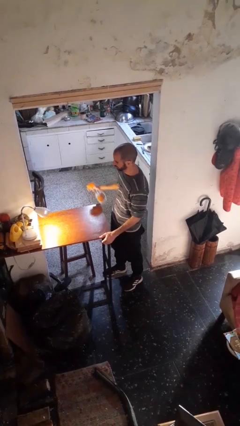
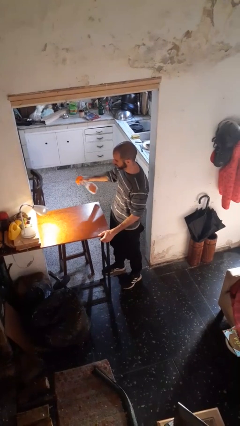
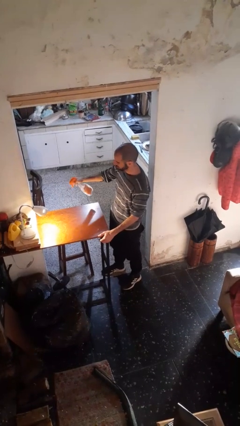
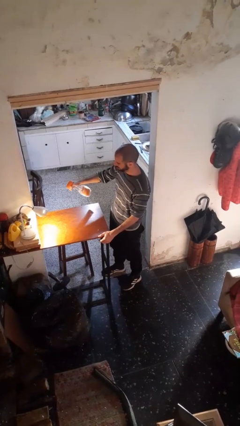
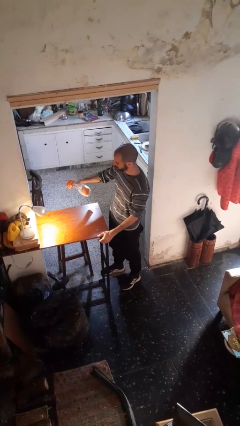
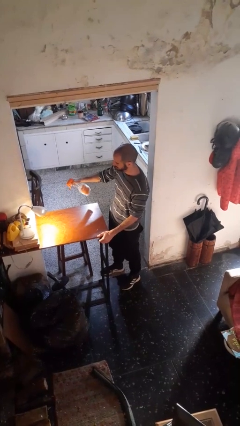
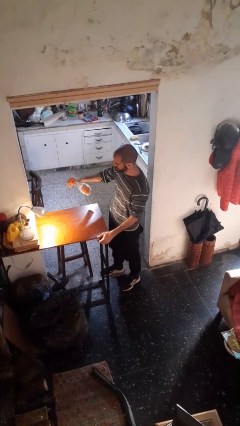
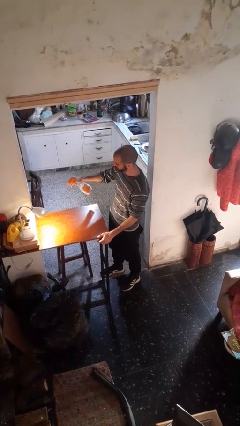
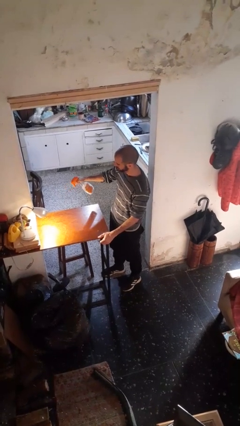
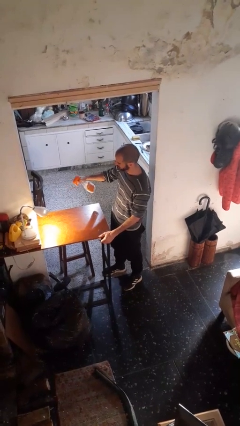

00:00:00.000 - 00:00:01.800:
person sprays from bottle

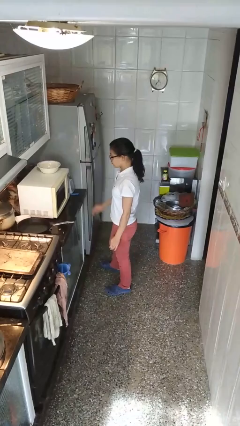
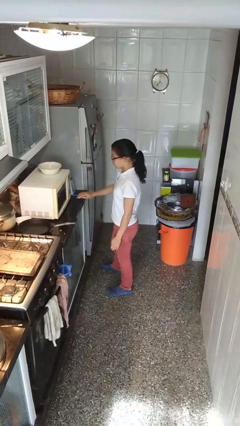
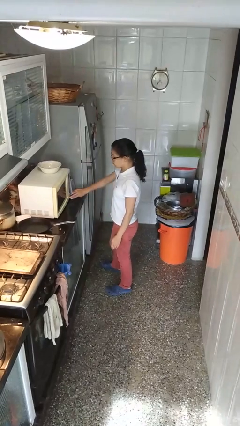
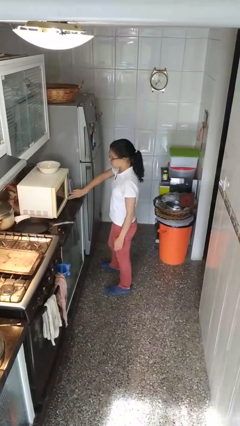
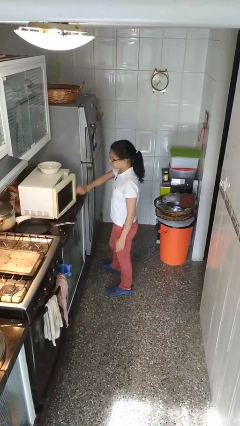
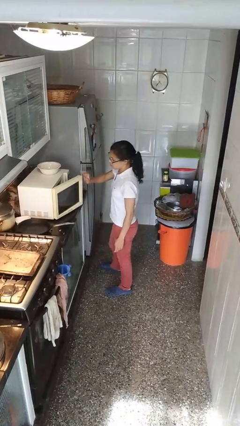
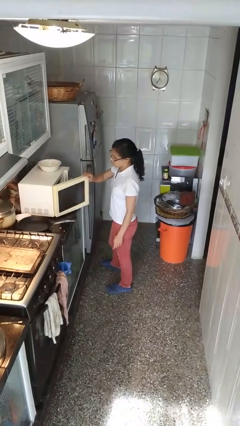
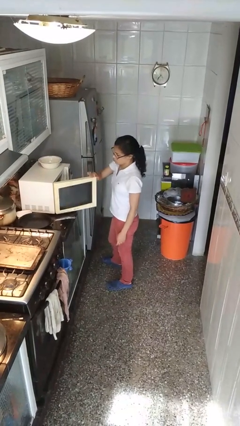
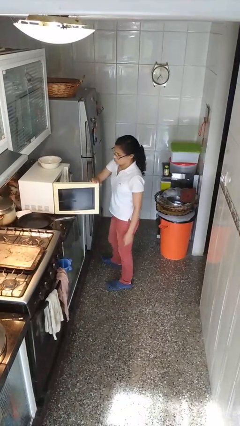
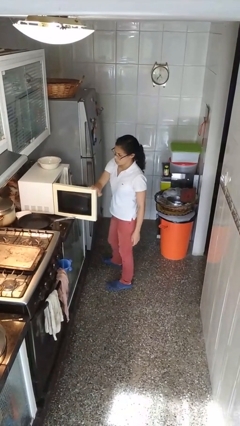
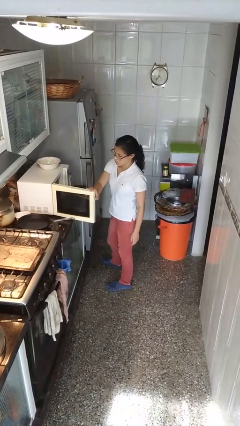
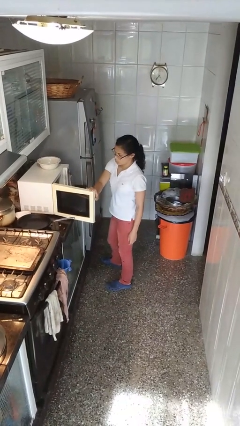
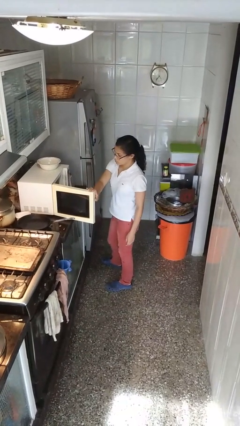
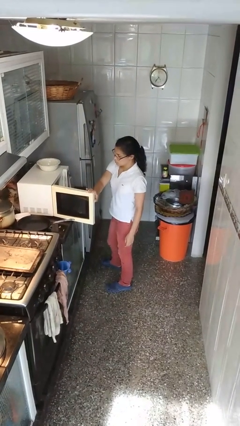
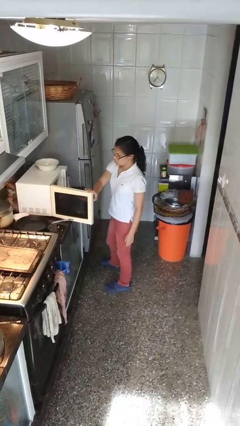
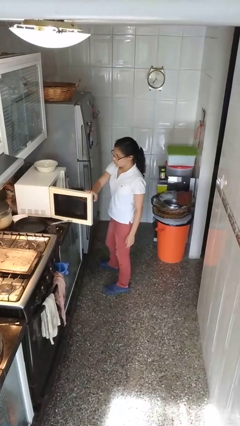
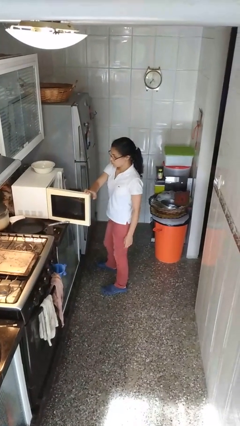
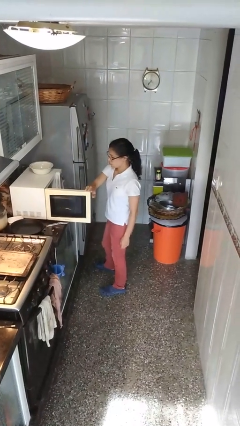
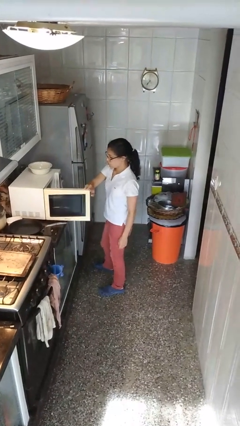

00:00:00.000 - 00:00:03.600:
person opens microwave

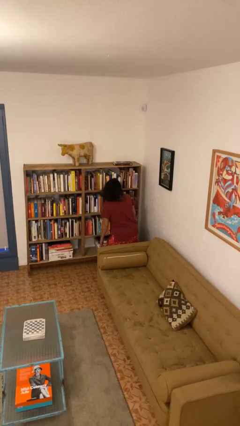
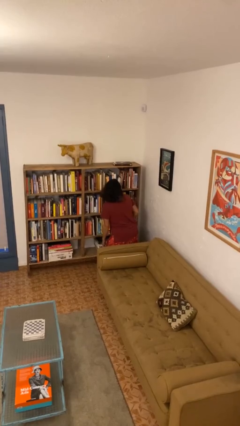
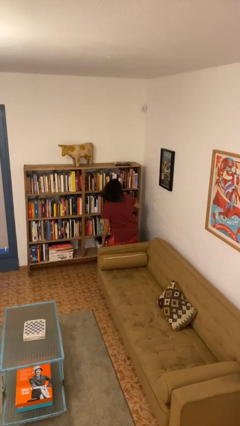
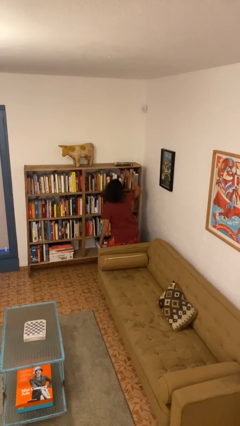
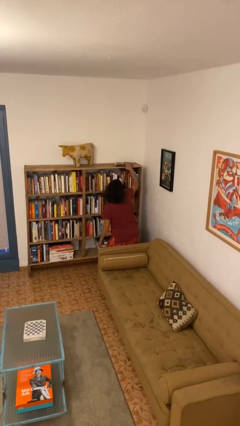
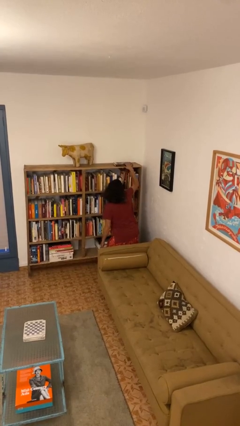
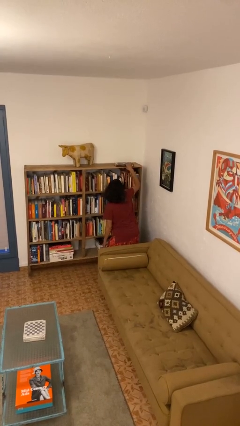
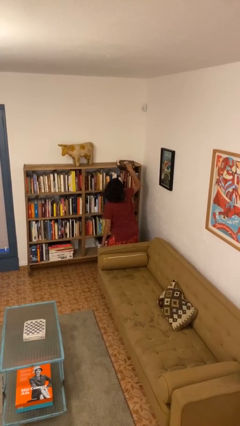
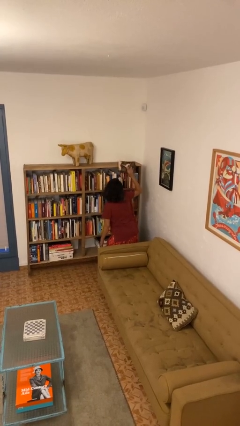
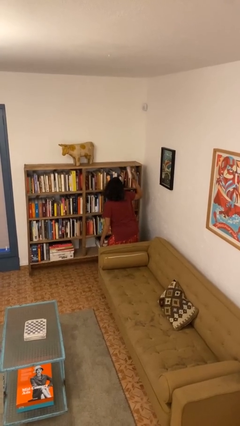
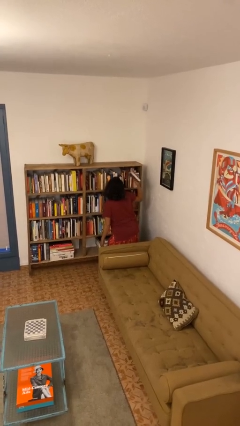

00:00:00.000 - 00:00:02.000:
person picks up object from shelf

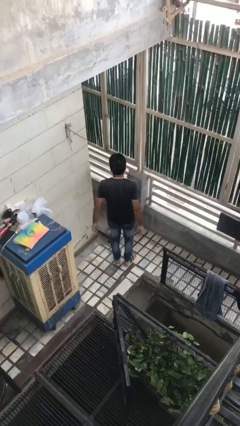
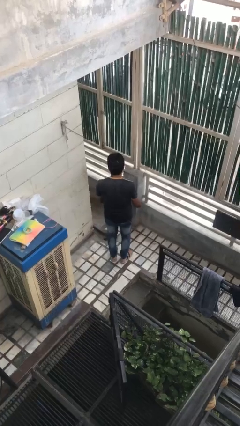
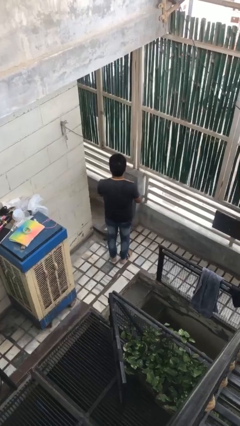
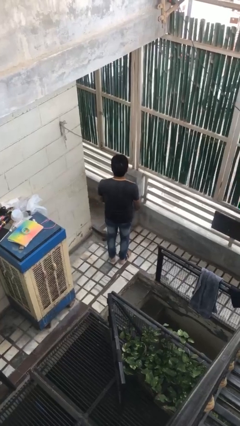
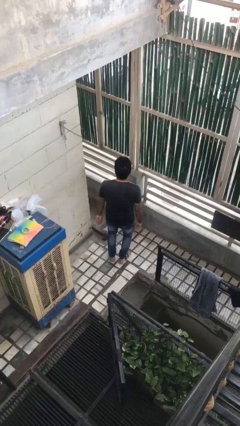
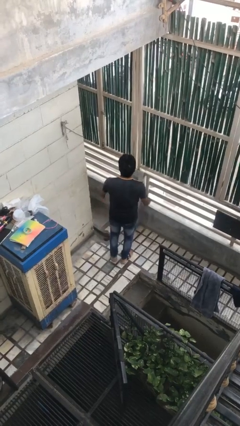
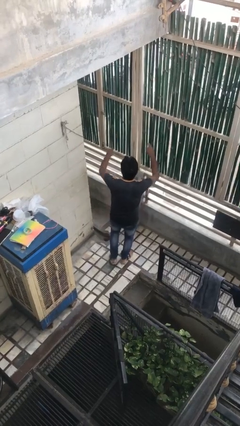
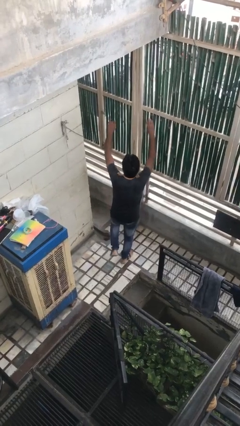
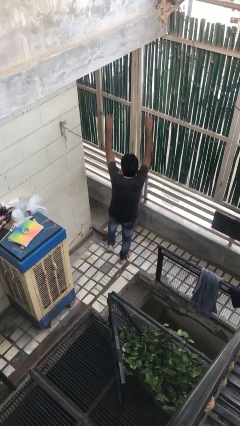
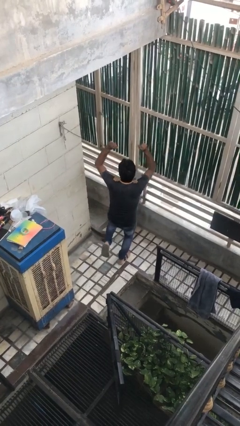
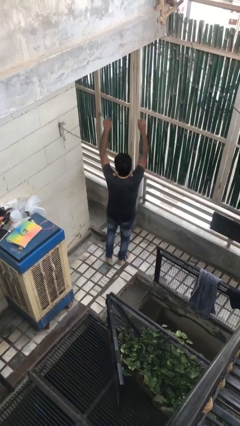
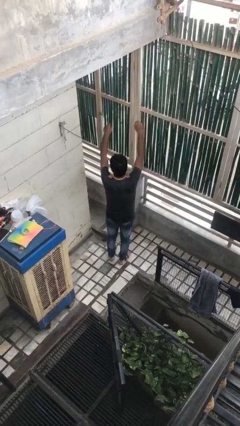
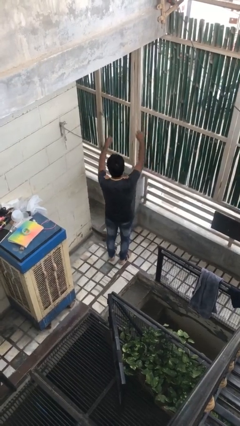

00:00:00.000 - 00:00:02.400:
person dances in place

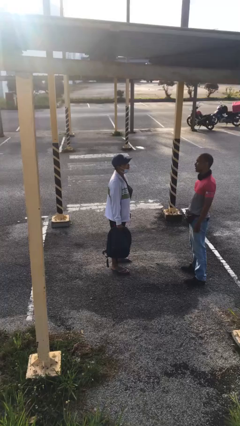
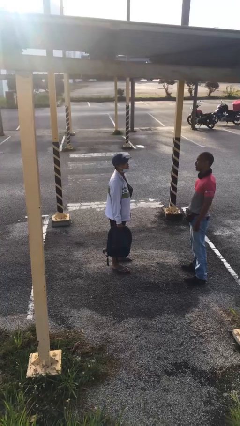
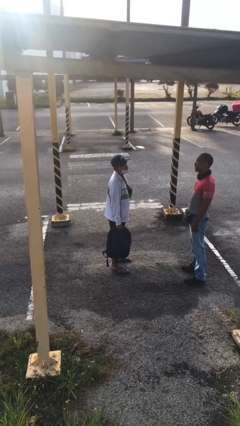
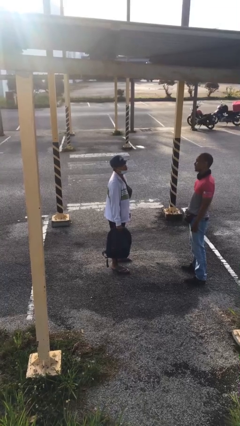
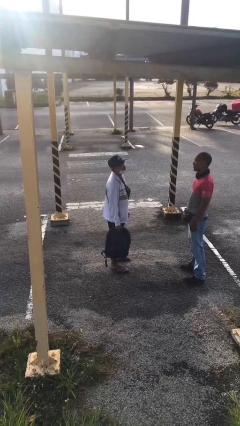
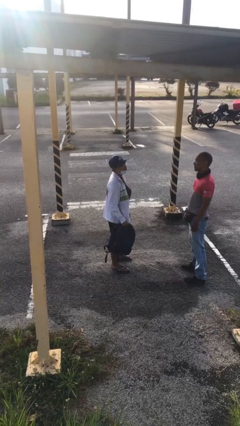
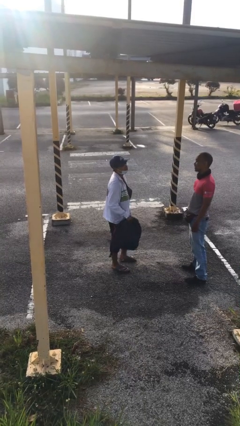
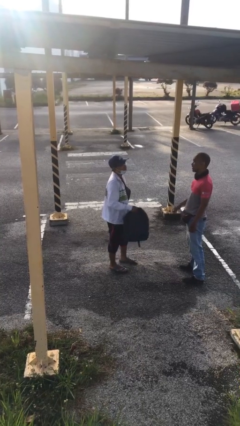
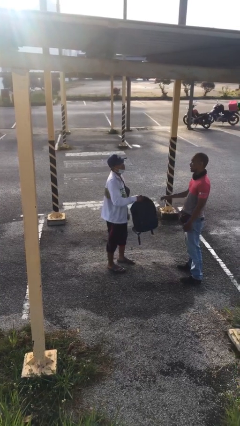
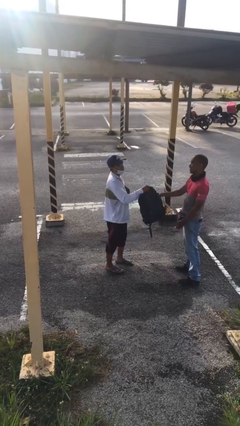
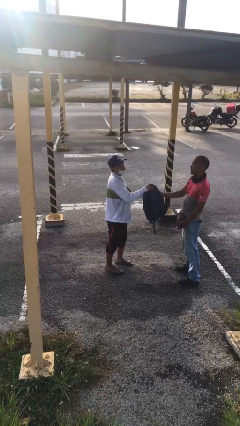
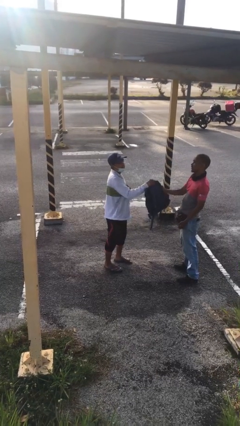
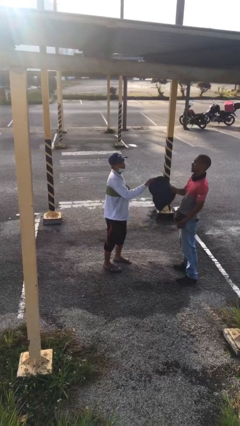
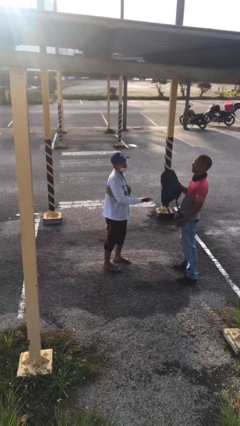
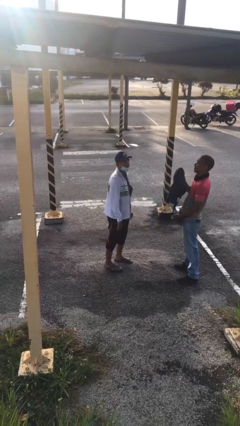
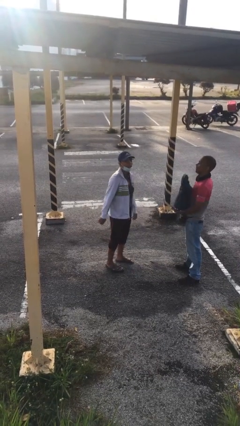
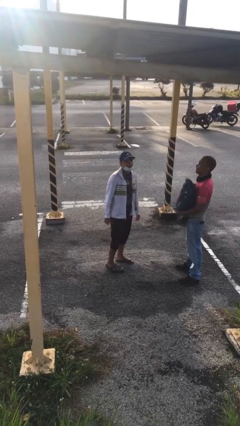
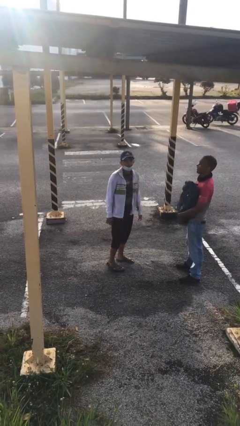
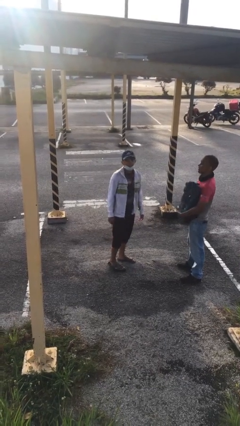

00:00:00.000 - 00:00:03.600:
person transfers object to person

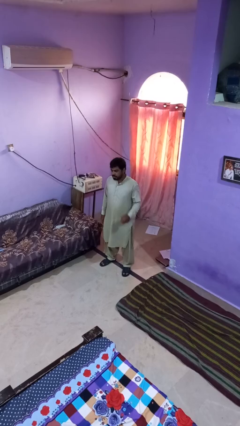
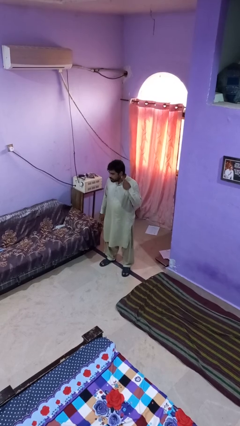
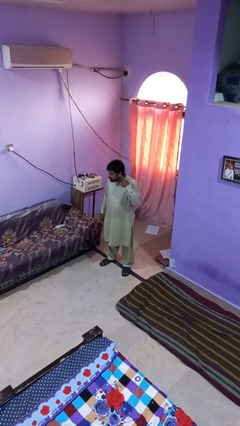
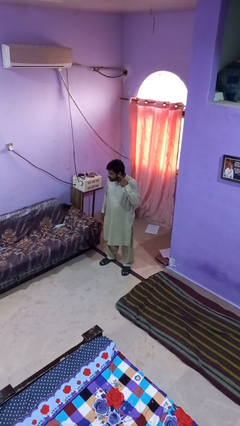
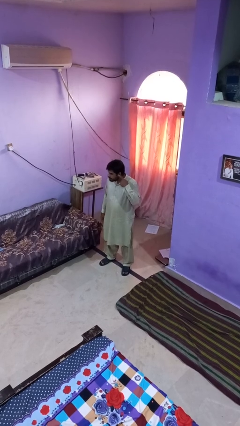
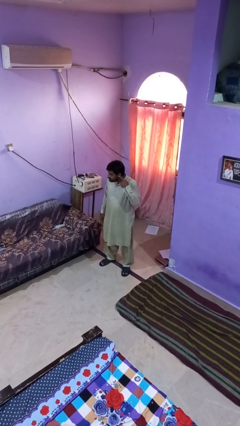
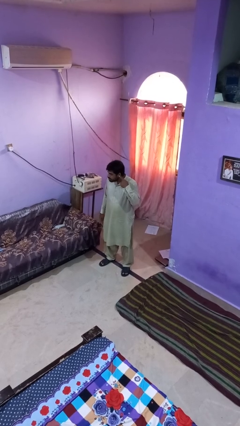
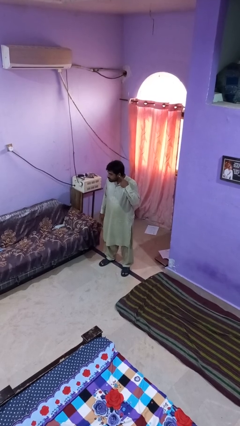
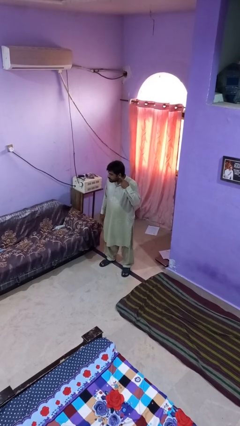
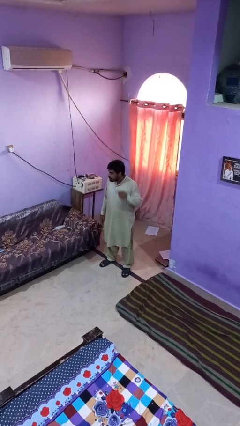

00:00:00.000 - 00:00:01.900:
person gestures listen closely

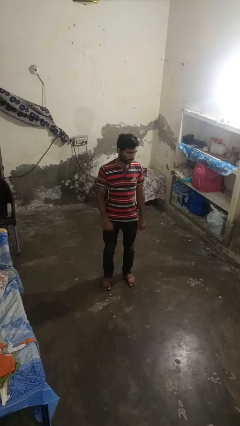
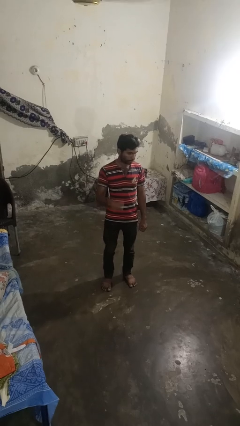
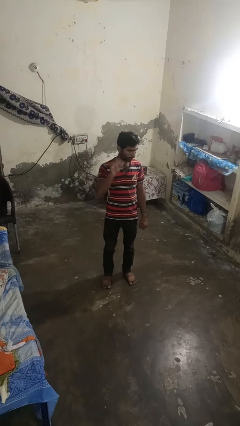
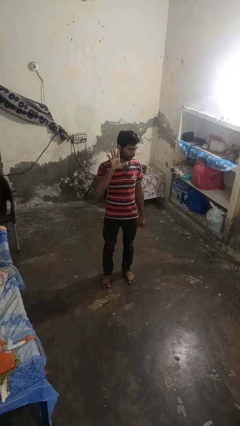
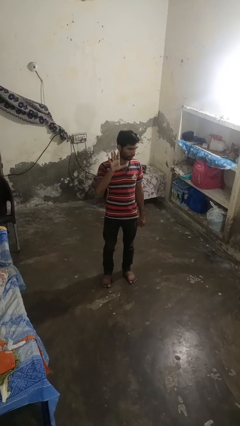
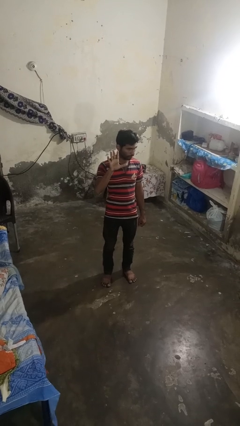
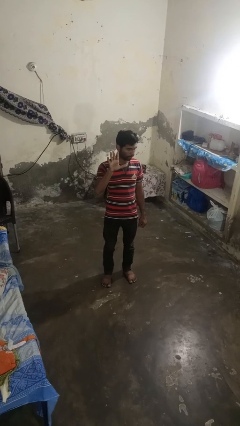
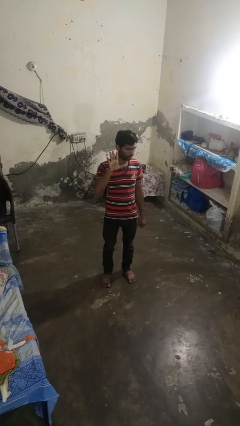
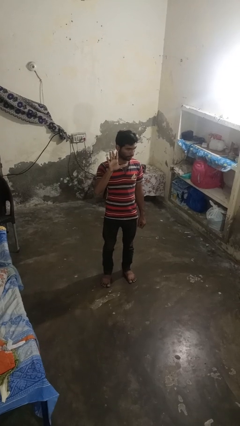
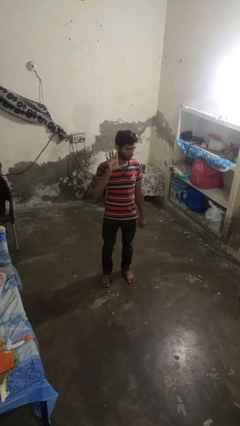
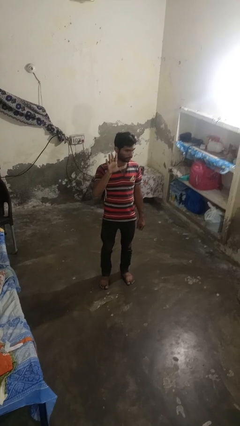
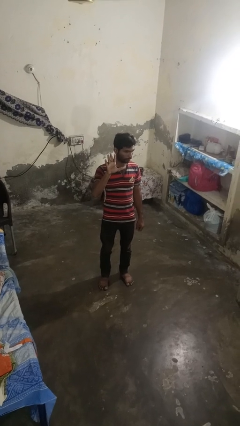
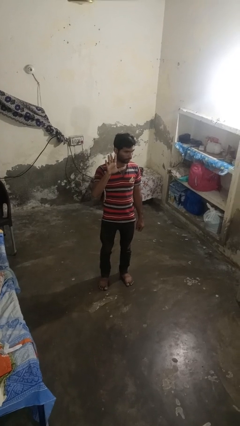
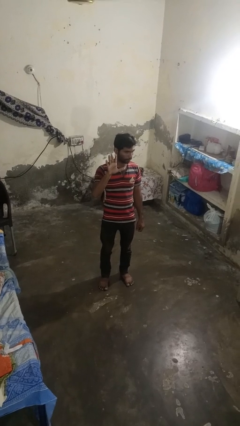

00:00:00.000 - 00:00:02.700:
person gestures number five
